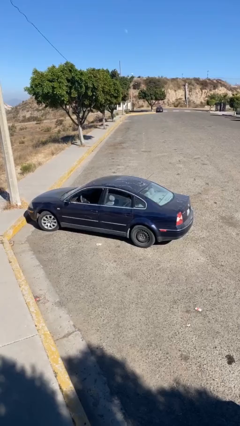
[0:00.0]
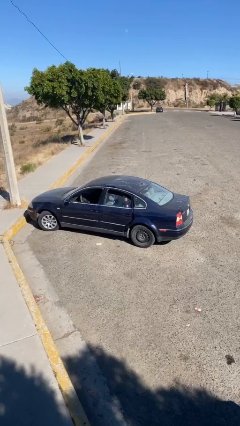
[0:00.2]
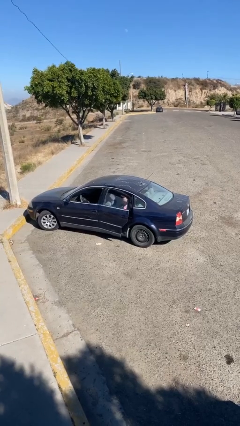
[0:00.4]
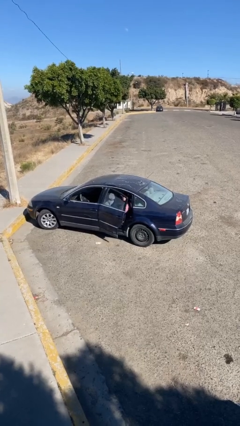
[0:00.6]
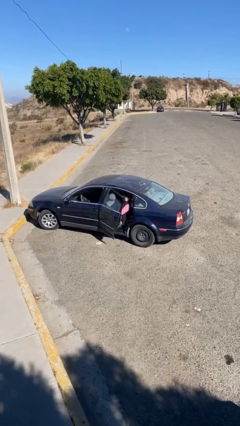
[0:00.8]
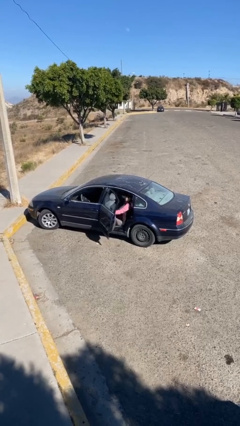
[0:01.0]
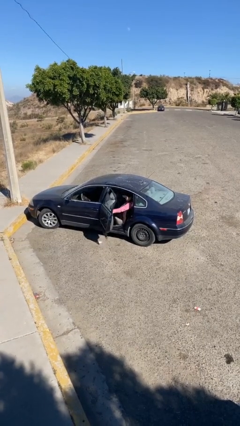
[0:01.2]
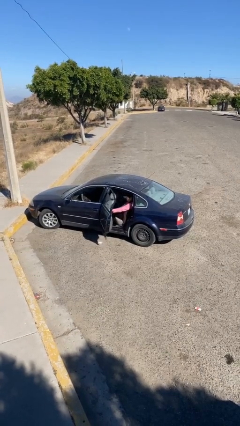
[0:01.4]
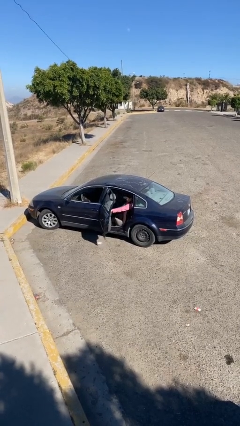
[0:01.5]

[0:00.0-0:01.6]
person opens car door

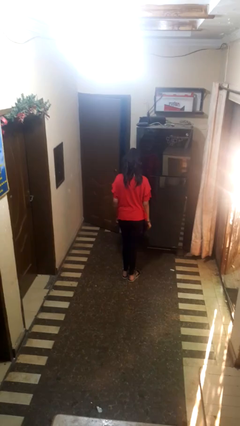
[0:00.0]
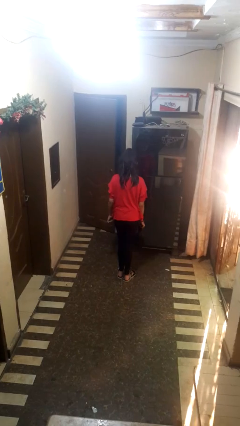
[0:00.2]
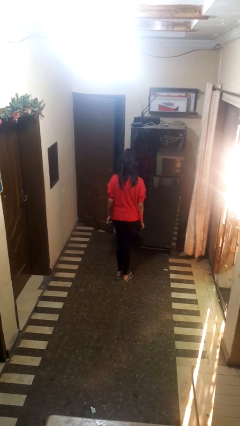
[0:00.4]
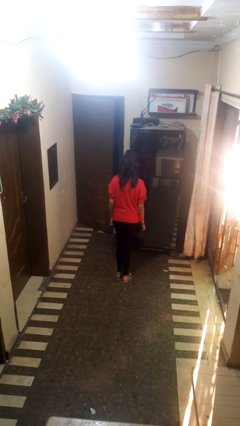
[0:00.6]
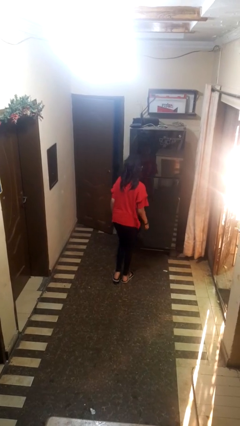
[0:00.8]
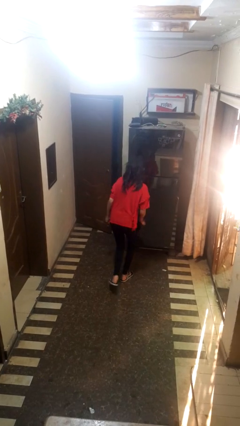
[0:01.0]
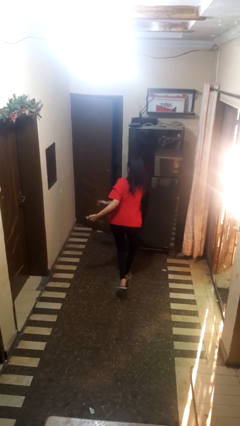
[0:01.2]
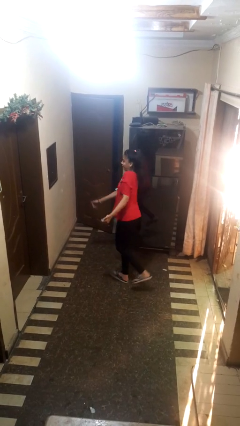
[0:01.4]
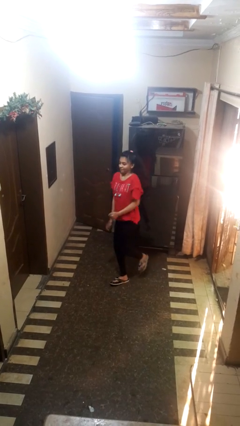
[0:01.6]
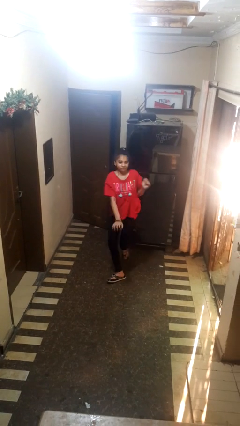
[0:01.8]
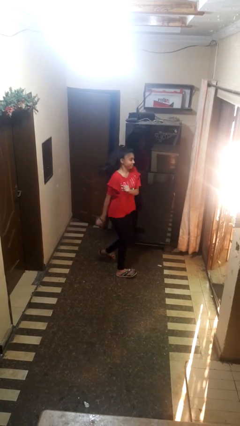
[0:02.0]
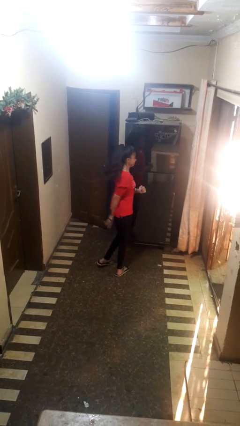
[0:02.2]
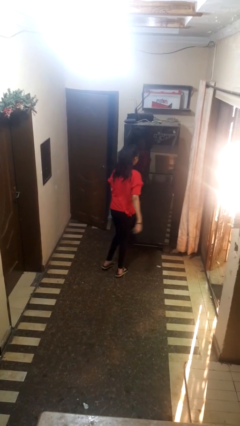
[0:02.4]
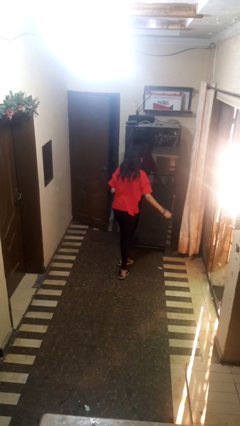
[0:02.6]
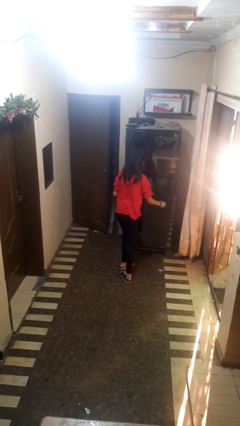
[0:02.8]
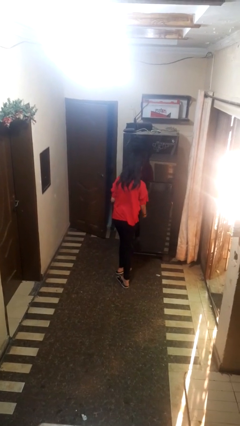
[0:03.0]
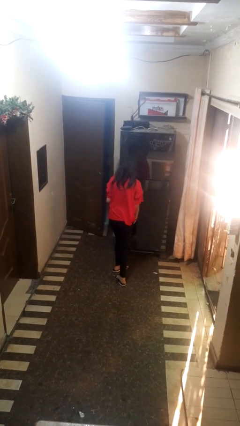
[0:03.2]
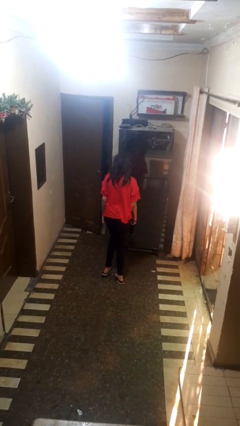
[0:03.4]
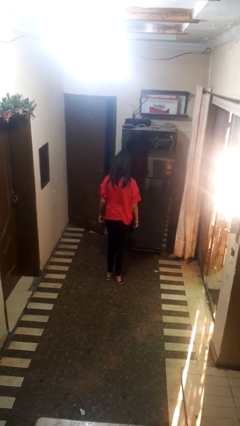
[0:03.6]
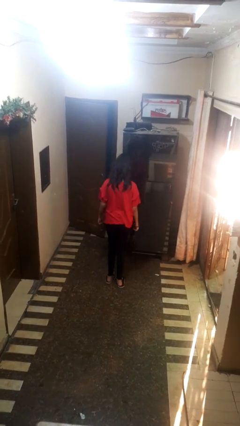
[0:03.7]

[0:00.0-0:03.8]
person twirls

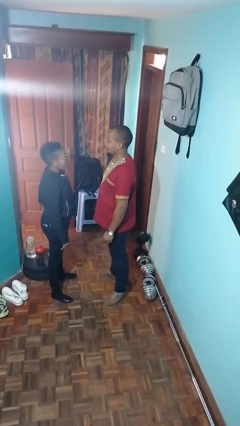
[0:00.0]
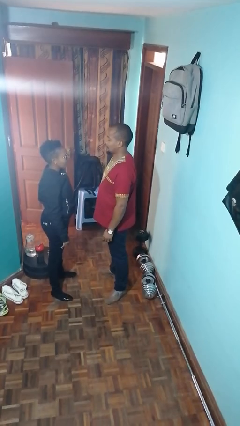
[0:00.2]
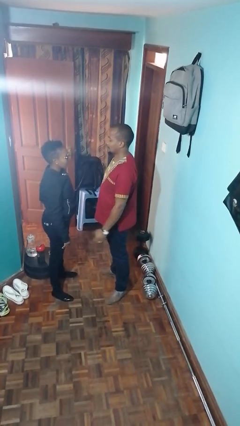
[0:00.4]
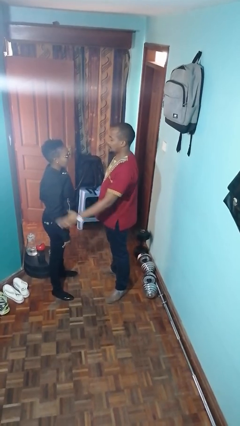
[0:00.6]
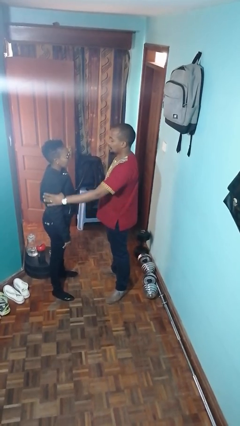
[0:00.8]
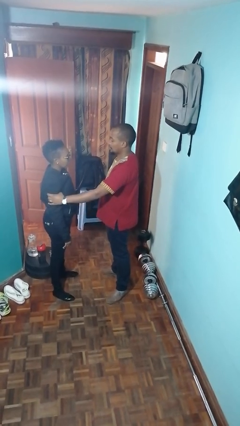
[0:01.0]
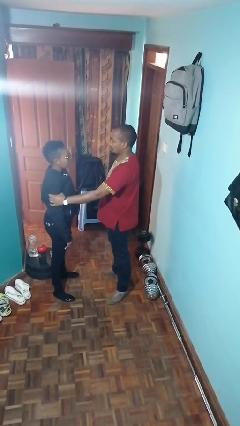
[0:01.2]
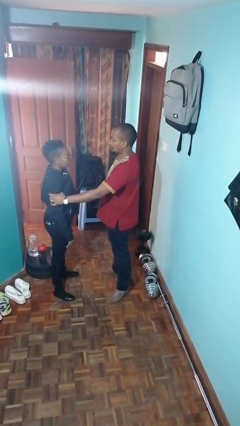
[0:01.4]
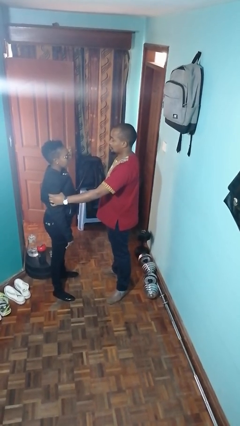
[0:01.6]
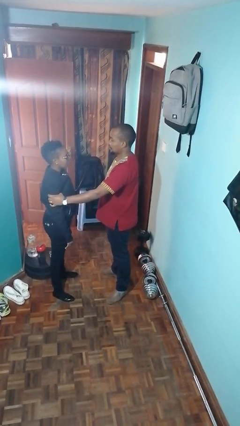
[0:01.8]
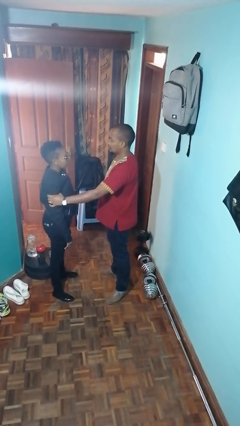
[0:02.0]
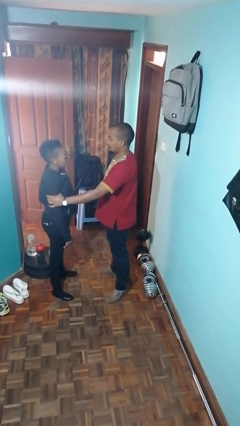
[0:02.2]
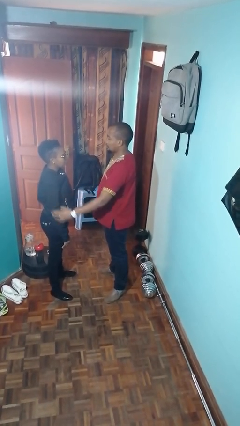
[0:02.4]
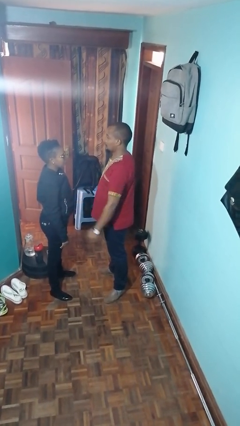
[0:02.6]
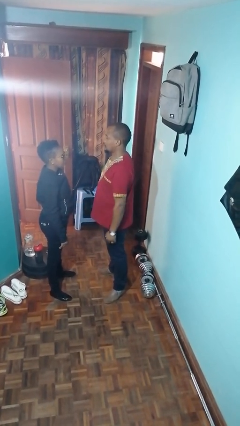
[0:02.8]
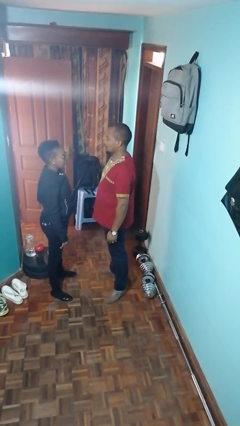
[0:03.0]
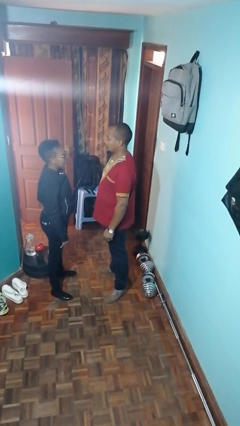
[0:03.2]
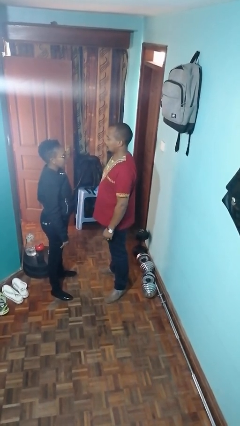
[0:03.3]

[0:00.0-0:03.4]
person grabs person by bicep

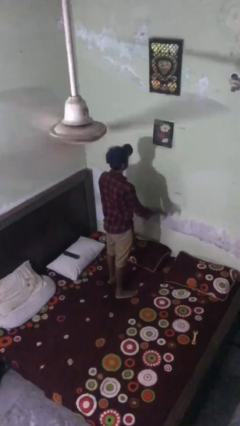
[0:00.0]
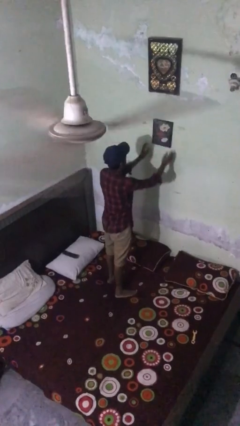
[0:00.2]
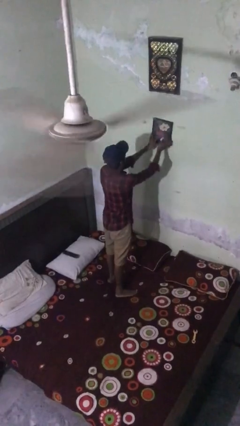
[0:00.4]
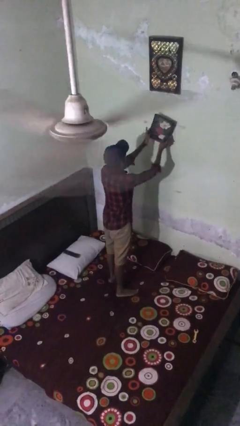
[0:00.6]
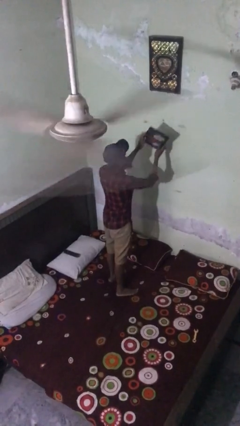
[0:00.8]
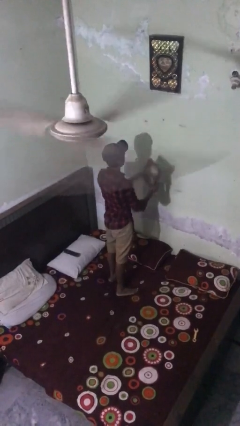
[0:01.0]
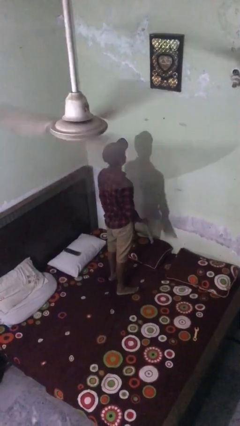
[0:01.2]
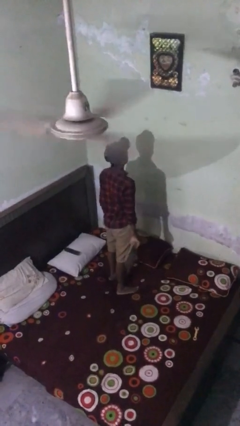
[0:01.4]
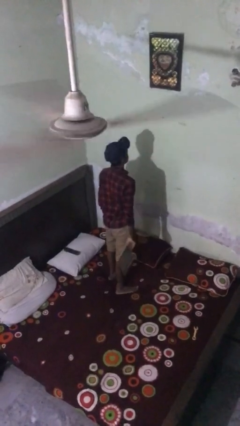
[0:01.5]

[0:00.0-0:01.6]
person takes down picture frame

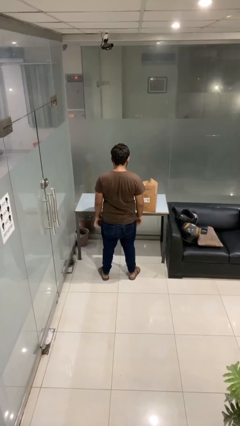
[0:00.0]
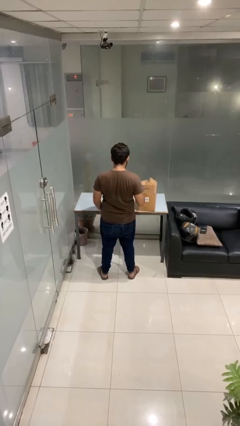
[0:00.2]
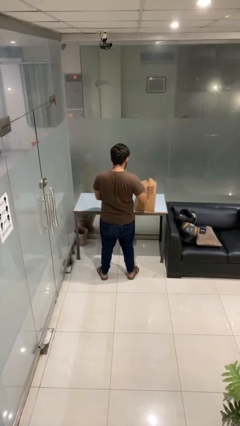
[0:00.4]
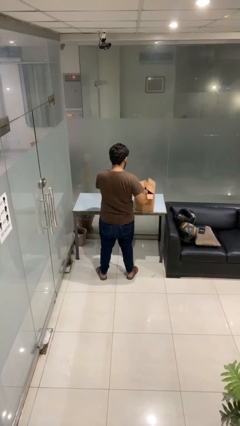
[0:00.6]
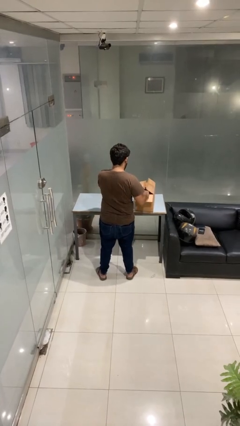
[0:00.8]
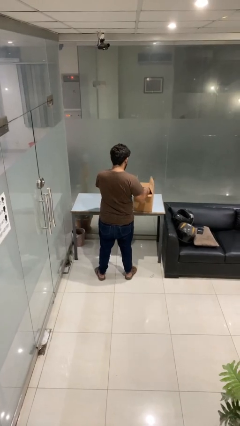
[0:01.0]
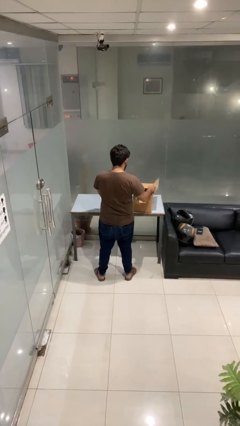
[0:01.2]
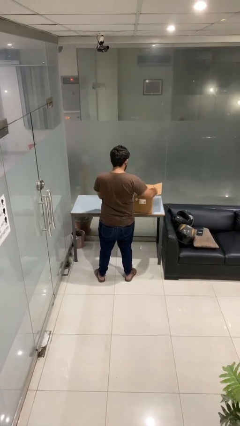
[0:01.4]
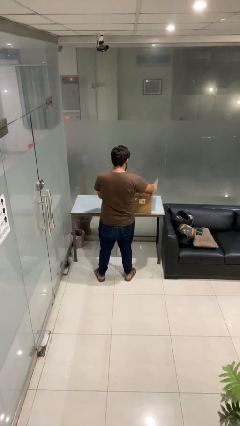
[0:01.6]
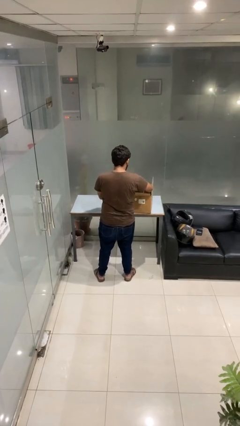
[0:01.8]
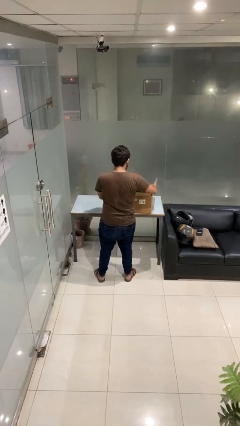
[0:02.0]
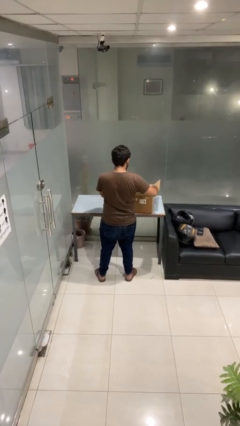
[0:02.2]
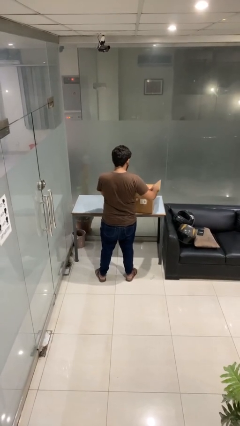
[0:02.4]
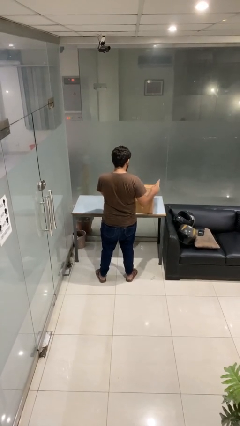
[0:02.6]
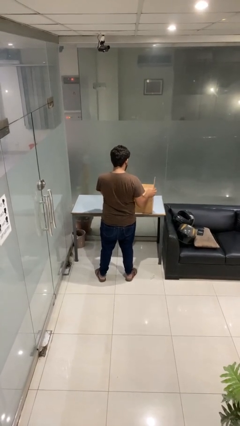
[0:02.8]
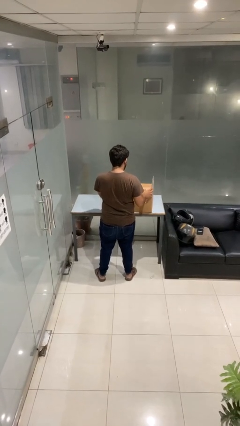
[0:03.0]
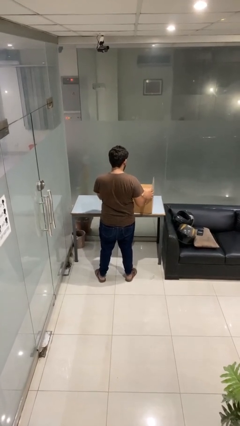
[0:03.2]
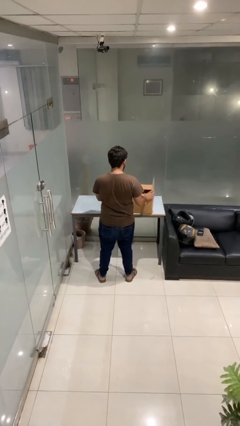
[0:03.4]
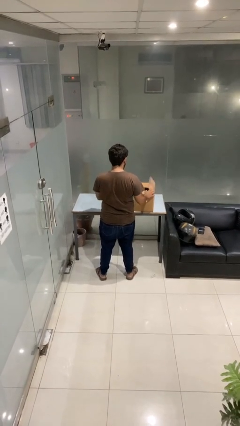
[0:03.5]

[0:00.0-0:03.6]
person searches in box

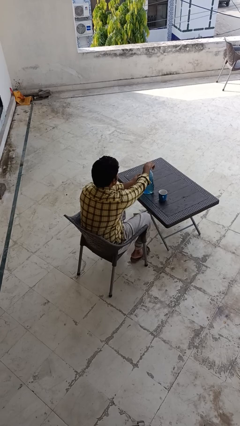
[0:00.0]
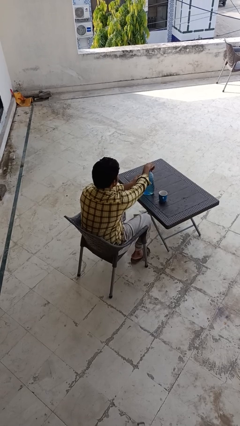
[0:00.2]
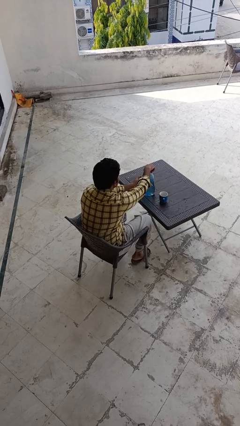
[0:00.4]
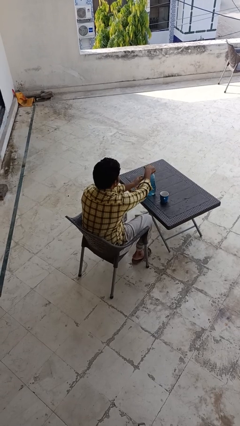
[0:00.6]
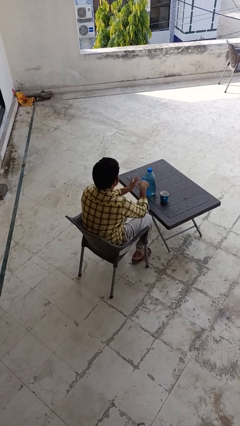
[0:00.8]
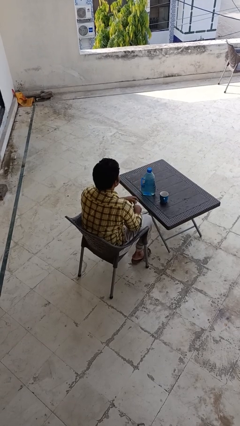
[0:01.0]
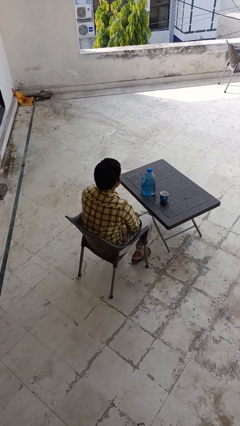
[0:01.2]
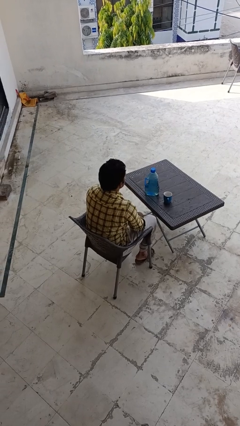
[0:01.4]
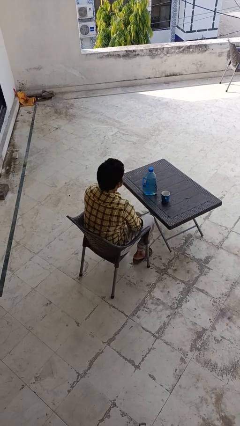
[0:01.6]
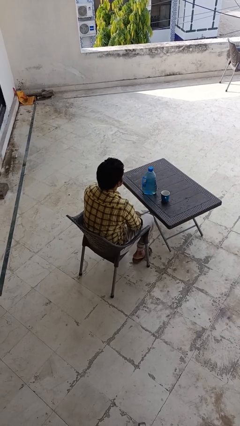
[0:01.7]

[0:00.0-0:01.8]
person screws lid to bottle

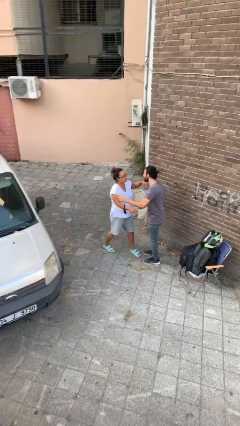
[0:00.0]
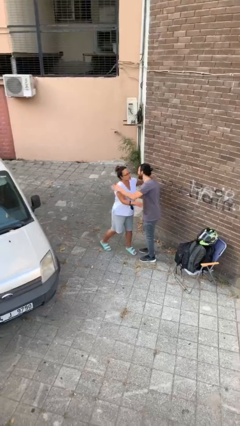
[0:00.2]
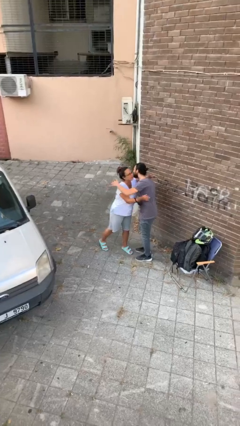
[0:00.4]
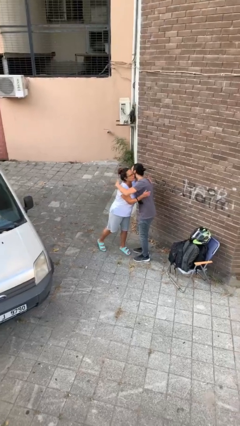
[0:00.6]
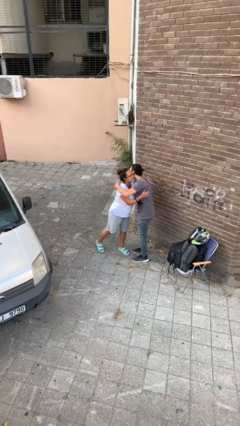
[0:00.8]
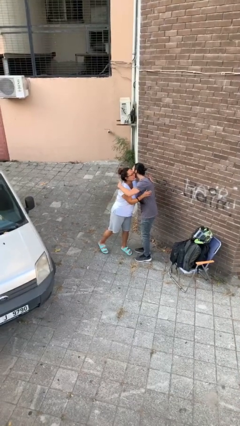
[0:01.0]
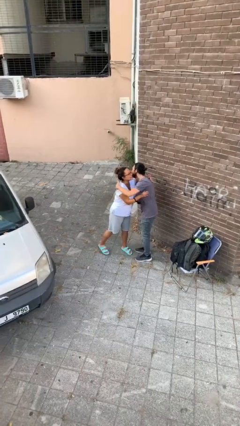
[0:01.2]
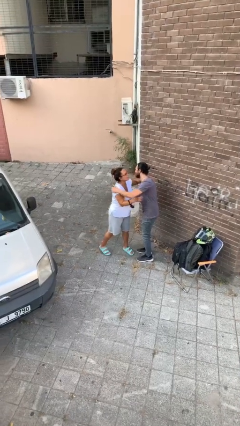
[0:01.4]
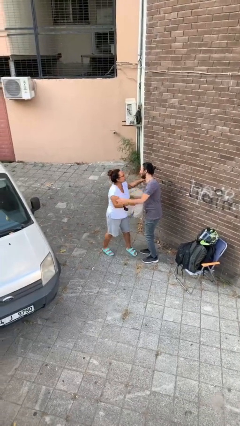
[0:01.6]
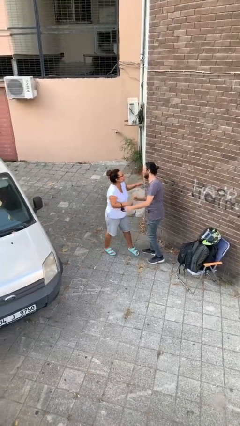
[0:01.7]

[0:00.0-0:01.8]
person embraces person
